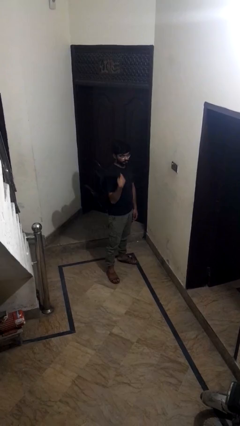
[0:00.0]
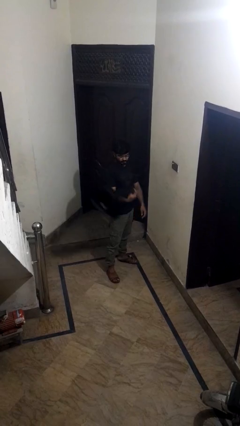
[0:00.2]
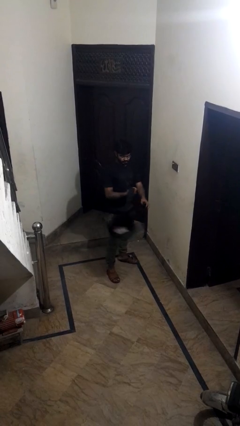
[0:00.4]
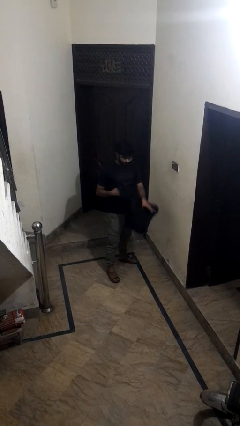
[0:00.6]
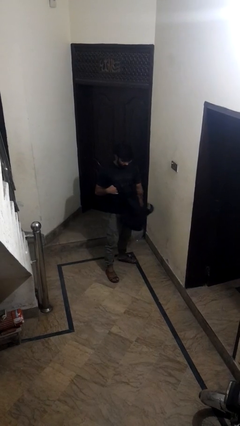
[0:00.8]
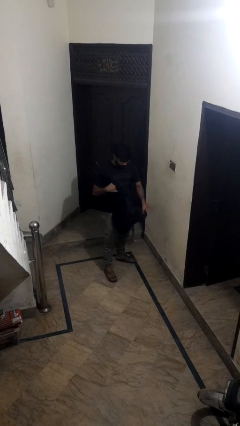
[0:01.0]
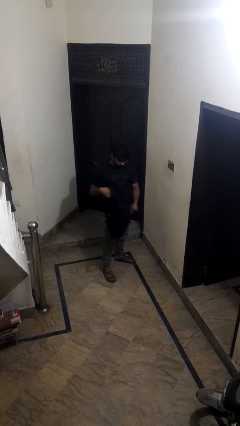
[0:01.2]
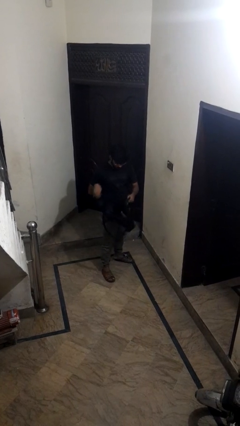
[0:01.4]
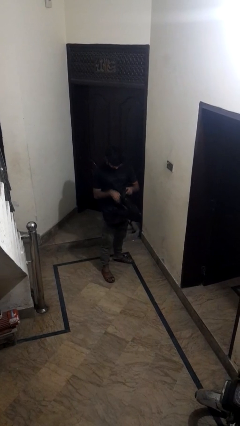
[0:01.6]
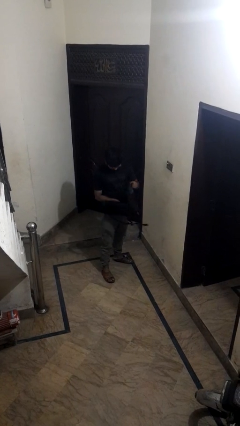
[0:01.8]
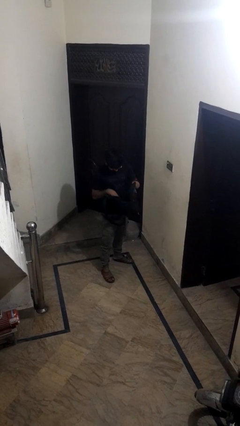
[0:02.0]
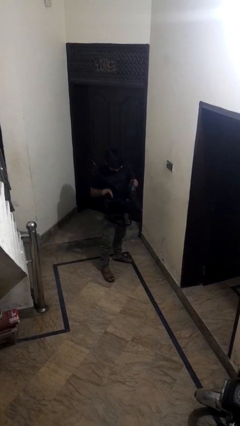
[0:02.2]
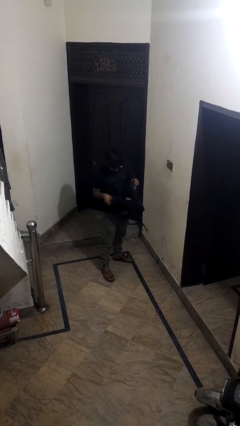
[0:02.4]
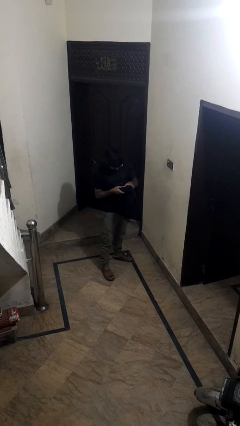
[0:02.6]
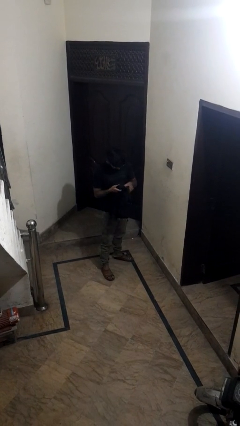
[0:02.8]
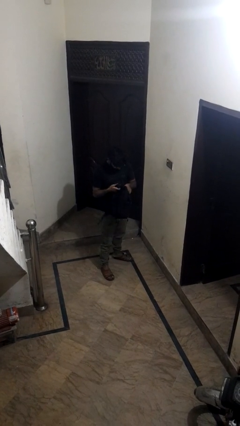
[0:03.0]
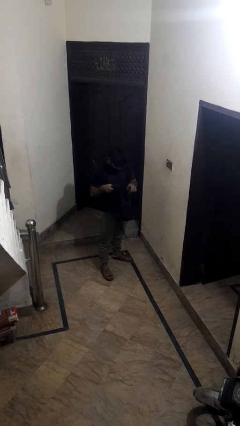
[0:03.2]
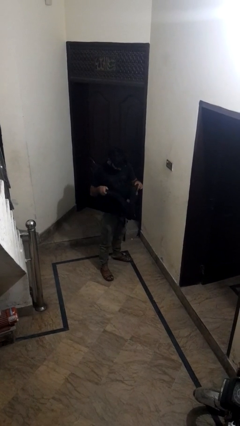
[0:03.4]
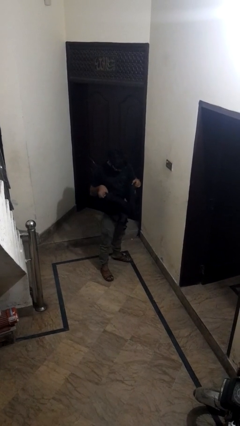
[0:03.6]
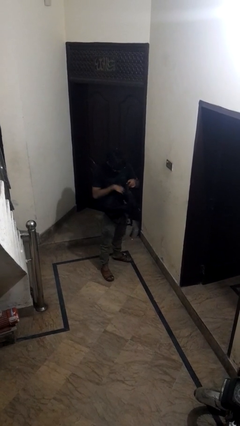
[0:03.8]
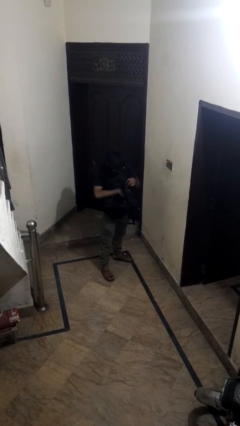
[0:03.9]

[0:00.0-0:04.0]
person searches in backpack

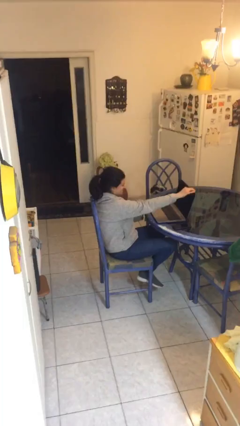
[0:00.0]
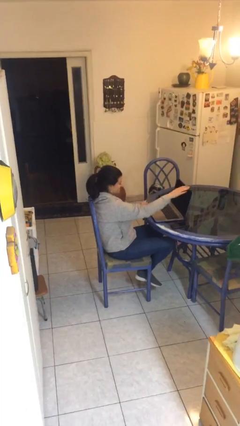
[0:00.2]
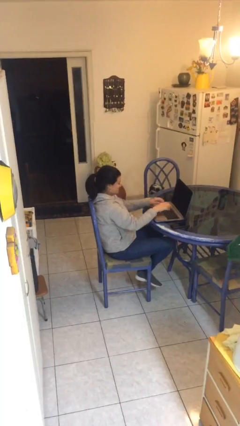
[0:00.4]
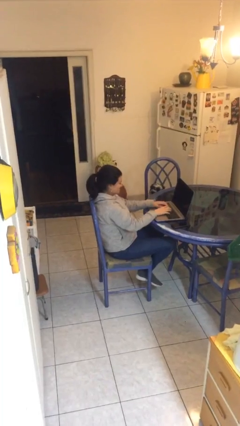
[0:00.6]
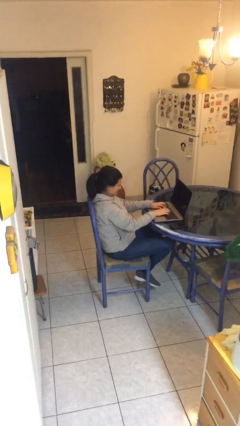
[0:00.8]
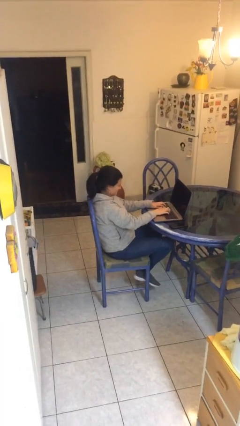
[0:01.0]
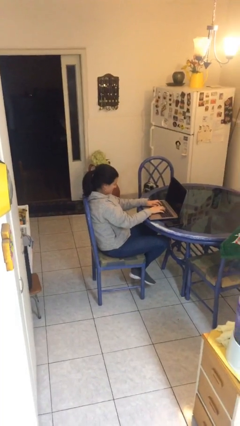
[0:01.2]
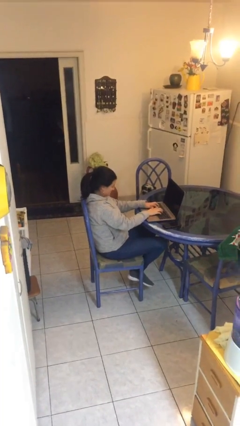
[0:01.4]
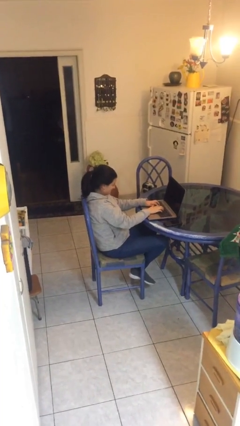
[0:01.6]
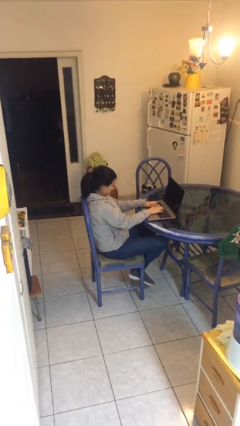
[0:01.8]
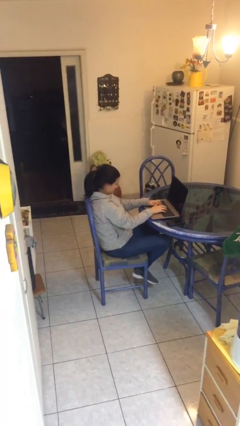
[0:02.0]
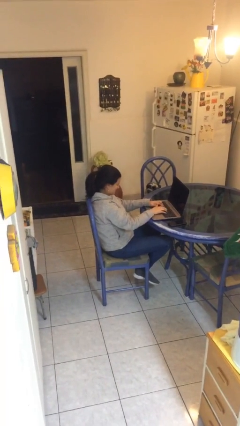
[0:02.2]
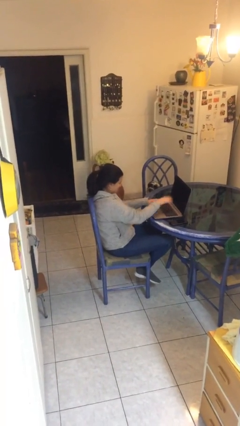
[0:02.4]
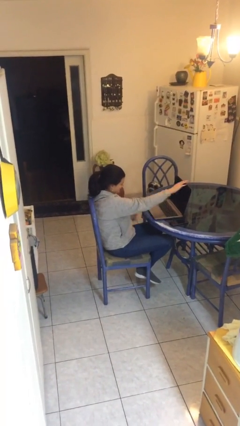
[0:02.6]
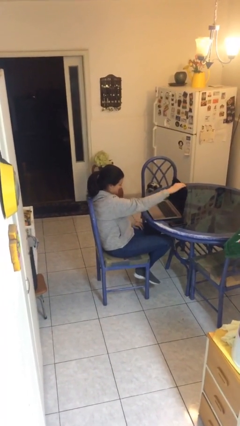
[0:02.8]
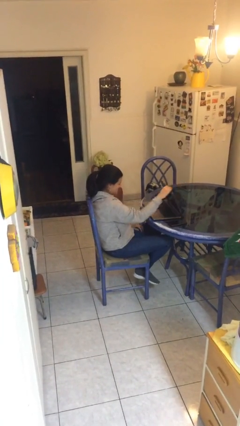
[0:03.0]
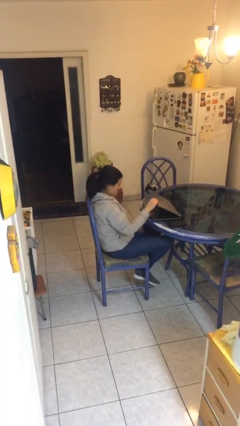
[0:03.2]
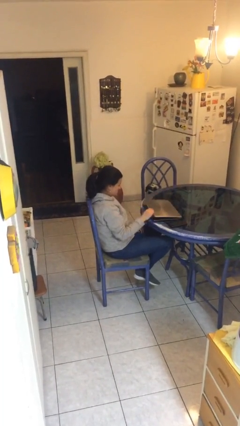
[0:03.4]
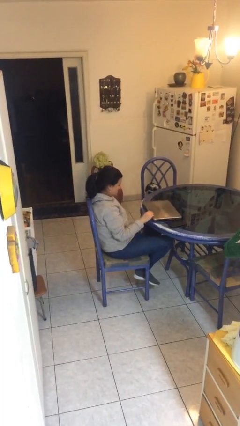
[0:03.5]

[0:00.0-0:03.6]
person interacts with laptop

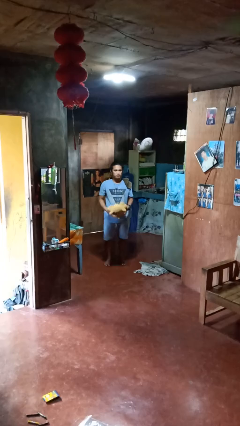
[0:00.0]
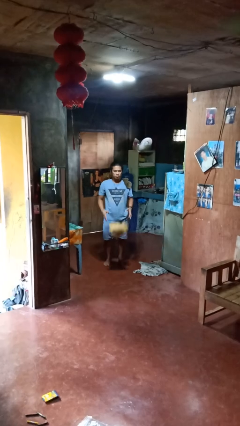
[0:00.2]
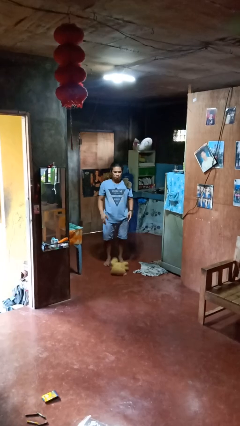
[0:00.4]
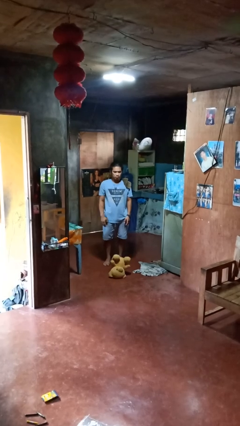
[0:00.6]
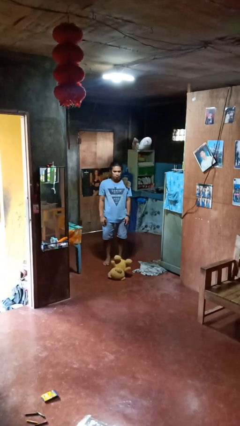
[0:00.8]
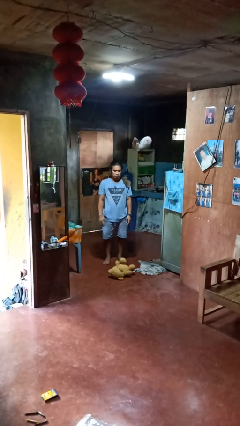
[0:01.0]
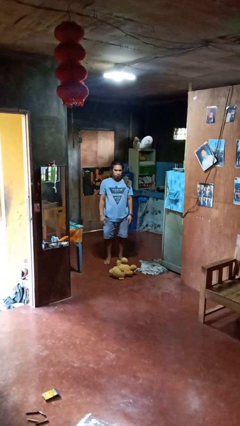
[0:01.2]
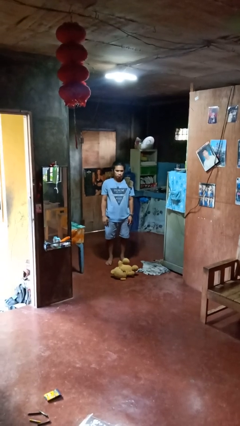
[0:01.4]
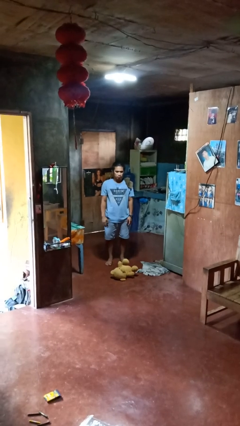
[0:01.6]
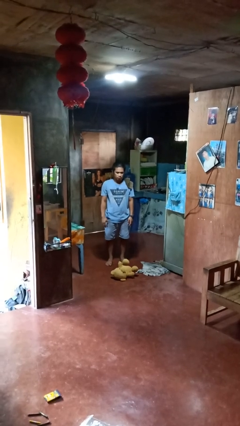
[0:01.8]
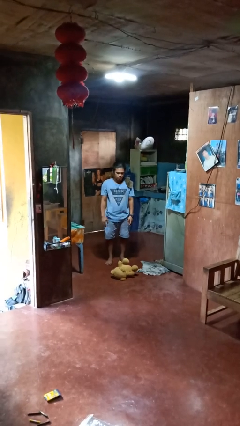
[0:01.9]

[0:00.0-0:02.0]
person drops object

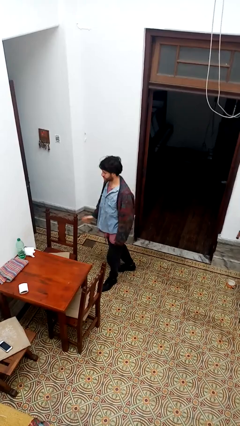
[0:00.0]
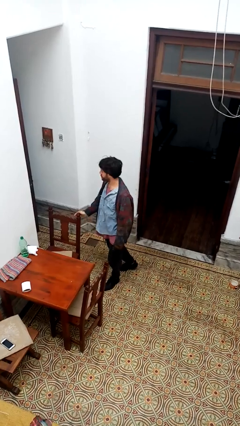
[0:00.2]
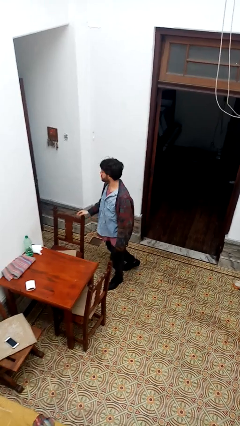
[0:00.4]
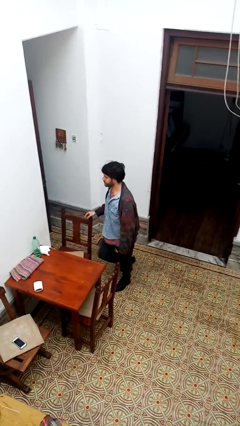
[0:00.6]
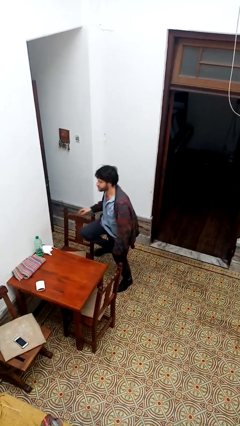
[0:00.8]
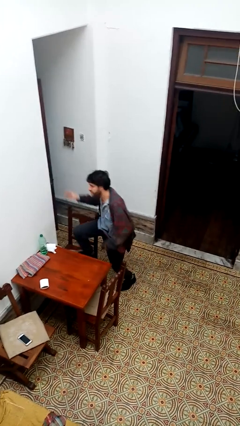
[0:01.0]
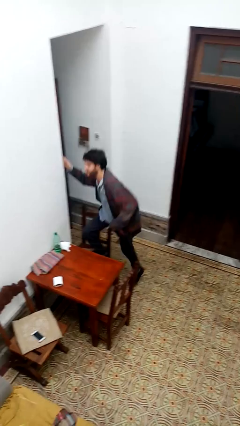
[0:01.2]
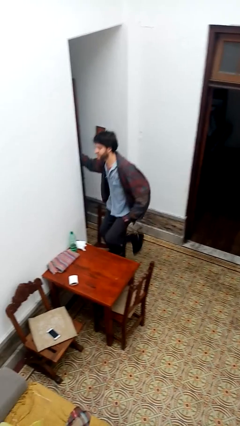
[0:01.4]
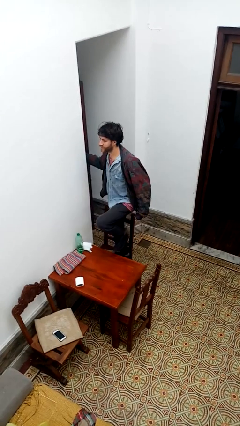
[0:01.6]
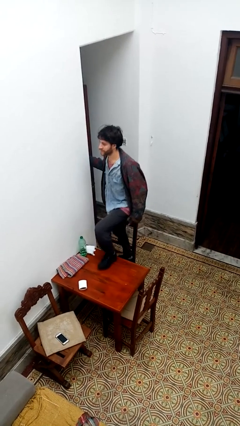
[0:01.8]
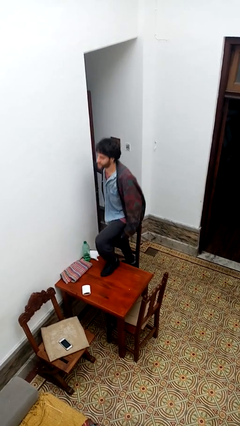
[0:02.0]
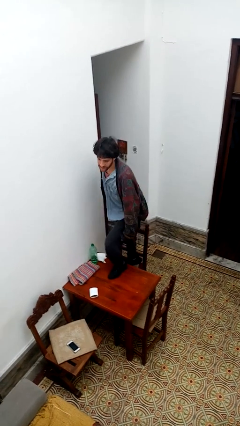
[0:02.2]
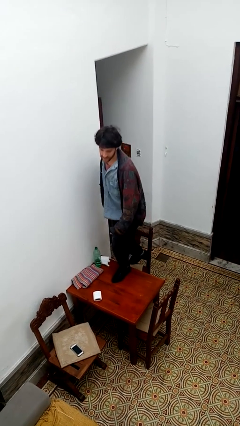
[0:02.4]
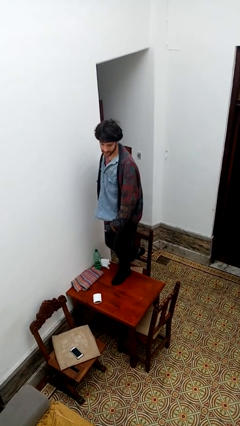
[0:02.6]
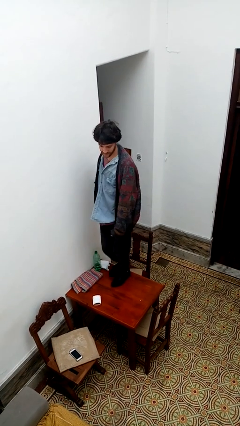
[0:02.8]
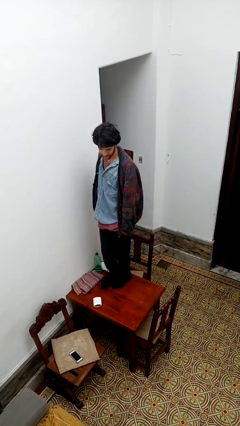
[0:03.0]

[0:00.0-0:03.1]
person climbs on table

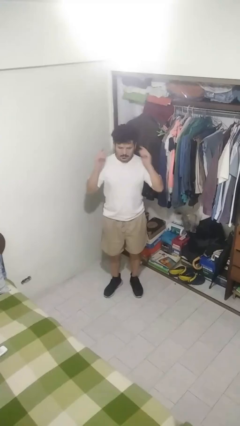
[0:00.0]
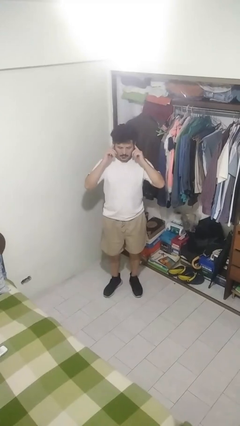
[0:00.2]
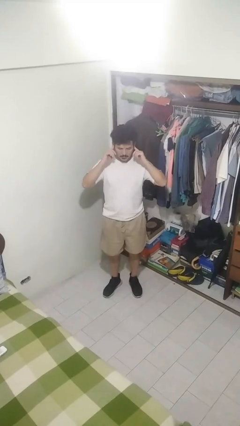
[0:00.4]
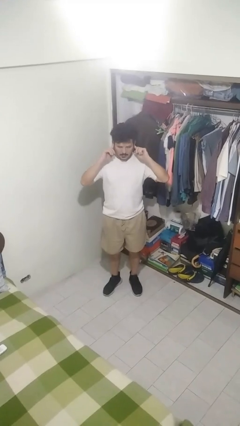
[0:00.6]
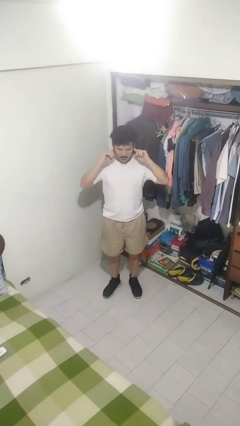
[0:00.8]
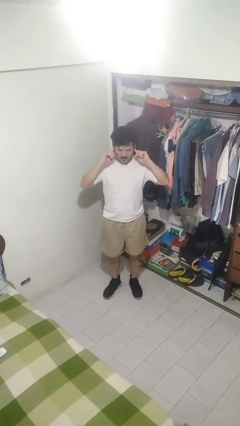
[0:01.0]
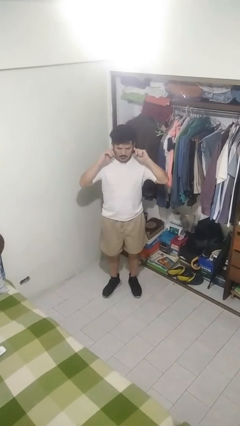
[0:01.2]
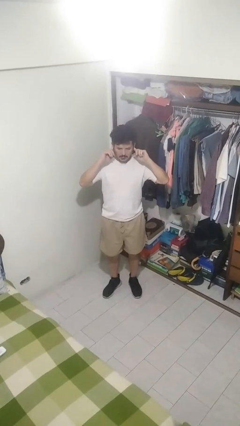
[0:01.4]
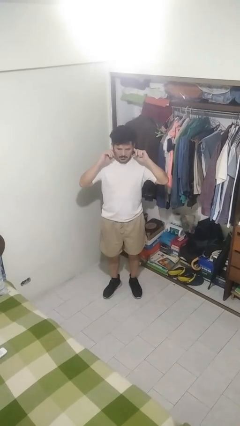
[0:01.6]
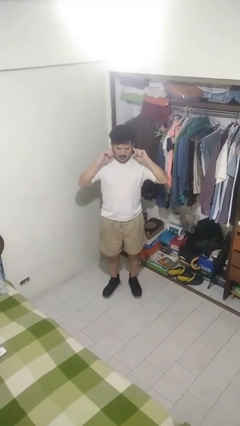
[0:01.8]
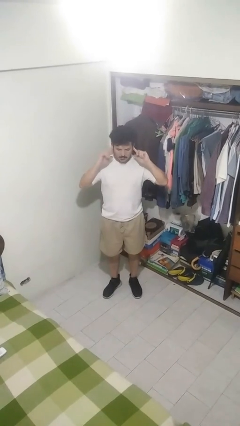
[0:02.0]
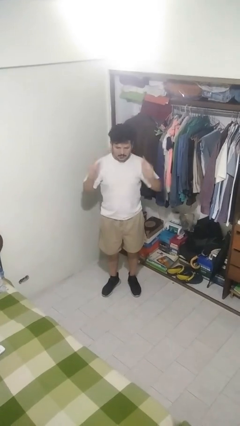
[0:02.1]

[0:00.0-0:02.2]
person puts fingers in ear
